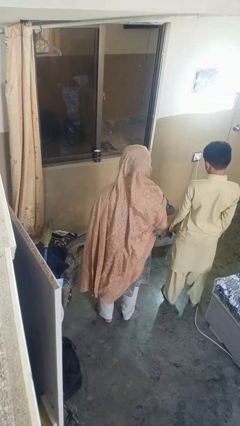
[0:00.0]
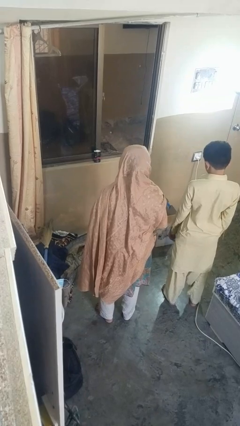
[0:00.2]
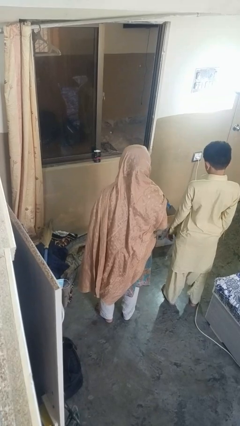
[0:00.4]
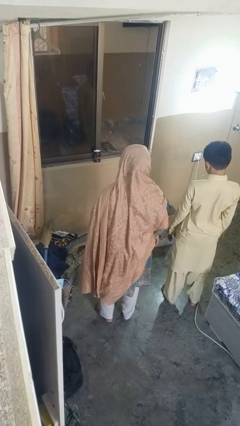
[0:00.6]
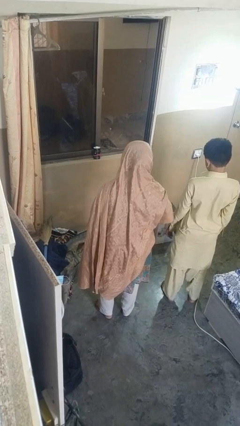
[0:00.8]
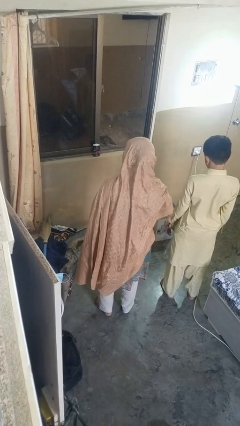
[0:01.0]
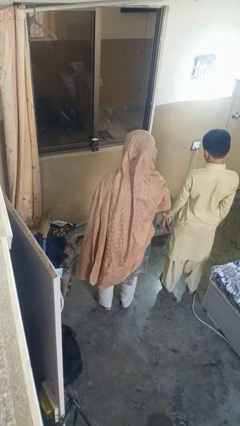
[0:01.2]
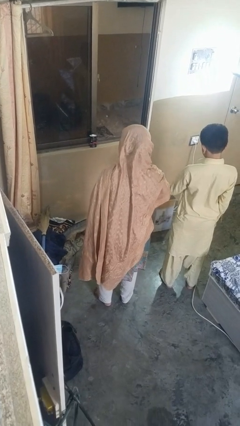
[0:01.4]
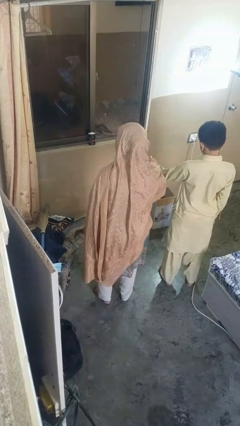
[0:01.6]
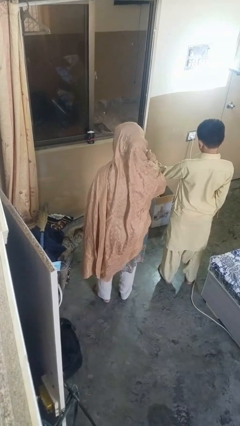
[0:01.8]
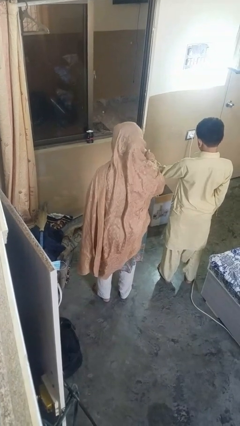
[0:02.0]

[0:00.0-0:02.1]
person grabs person by forearm

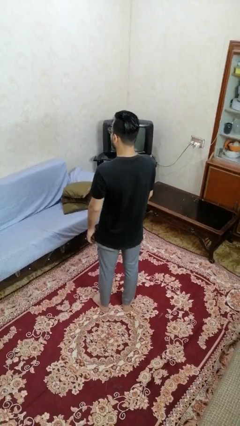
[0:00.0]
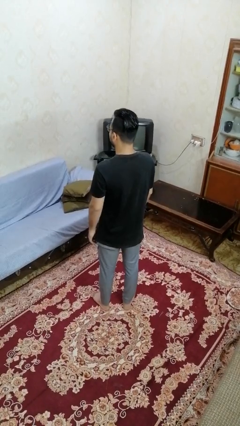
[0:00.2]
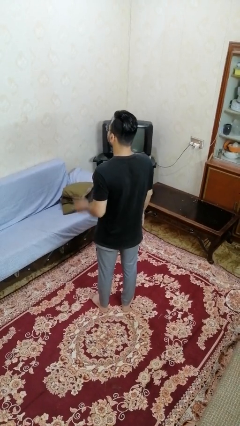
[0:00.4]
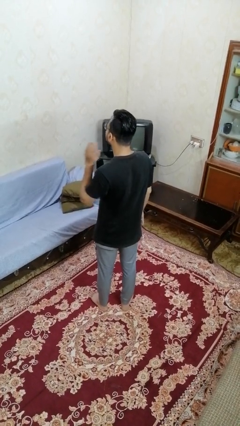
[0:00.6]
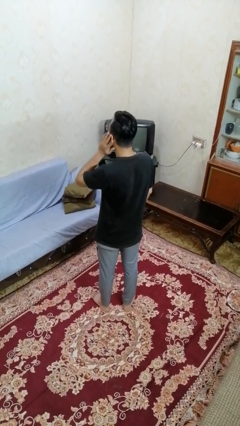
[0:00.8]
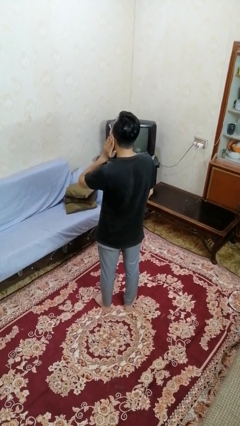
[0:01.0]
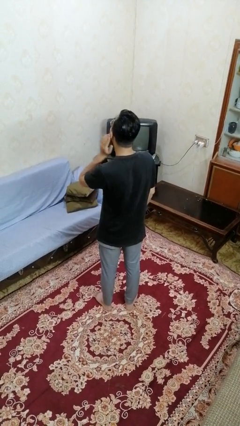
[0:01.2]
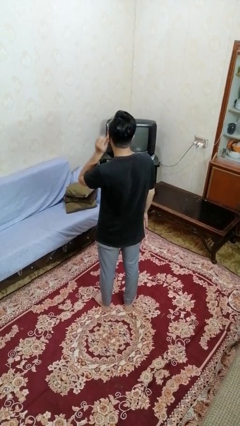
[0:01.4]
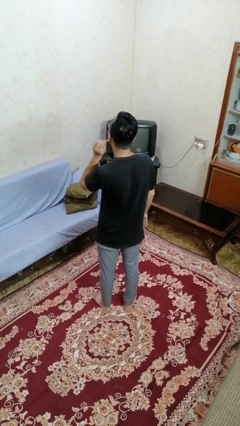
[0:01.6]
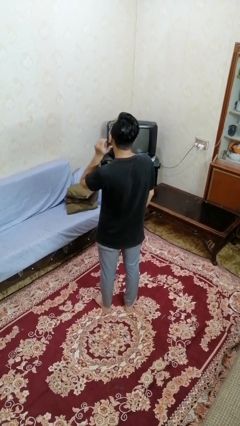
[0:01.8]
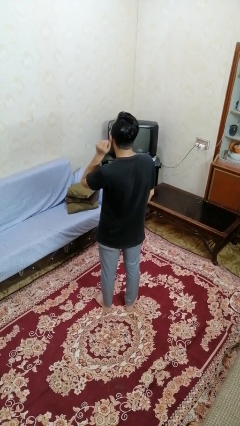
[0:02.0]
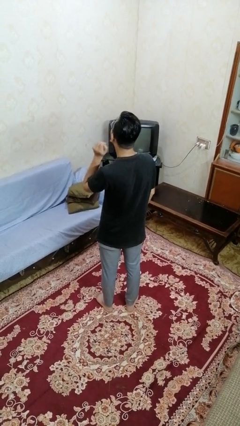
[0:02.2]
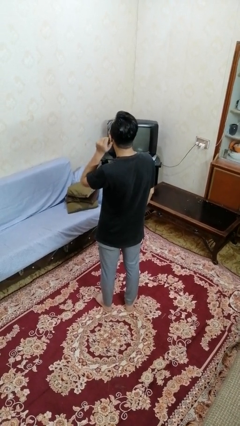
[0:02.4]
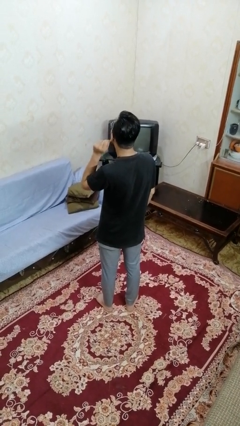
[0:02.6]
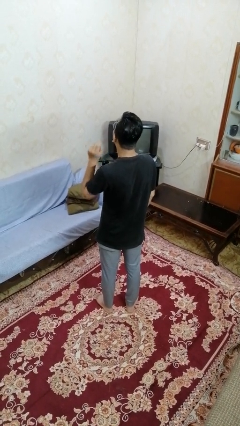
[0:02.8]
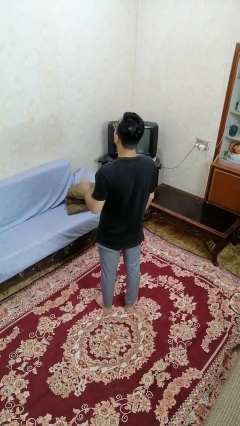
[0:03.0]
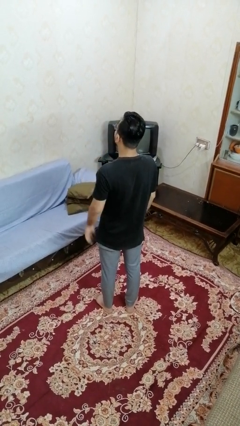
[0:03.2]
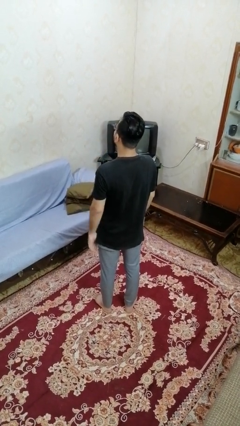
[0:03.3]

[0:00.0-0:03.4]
person touches earlobe

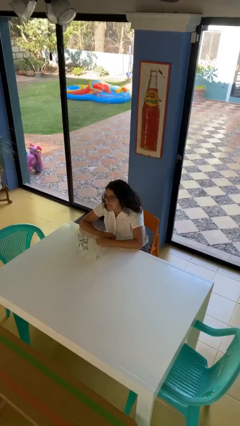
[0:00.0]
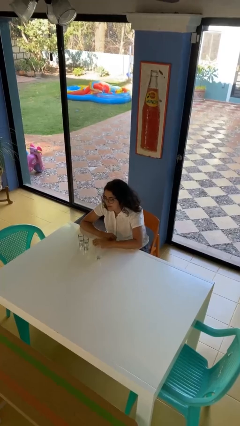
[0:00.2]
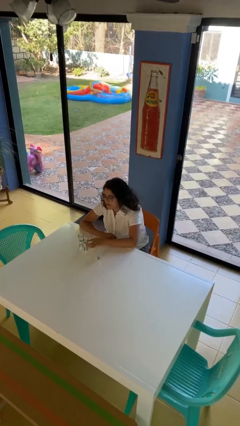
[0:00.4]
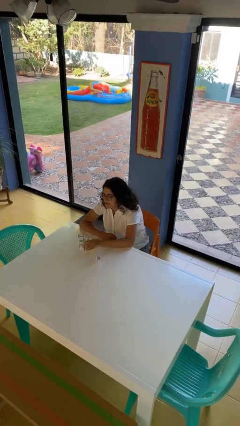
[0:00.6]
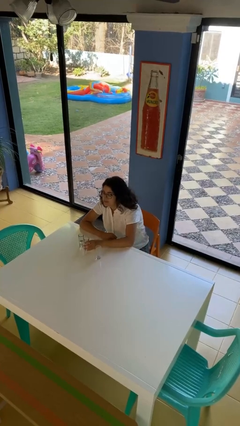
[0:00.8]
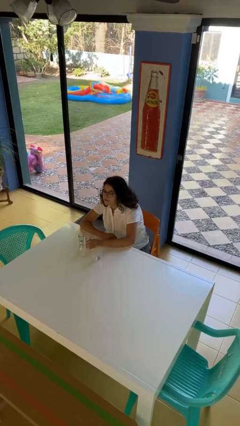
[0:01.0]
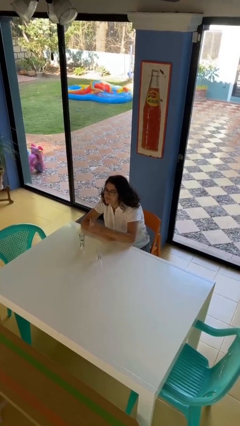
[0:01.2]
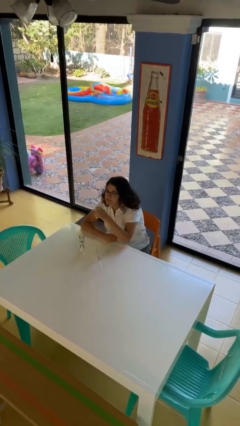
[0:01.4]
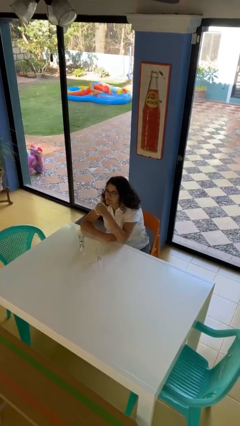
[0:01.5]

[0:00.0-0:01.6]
person picks up object from table

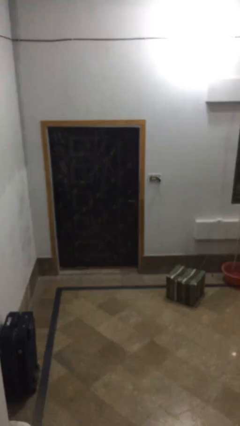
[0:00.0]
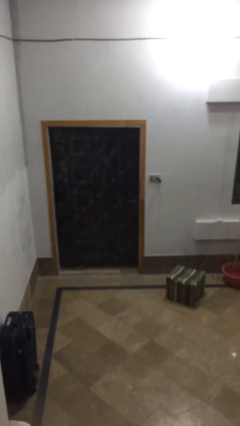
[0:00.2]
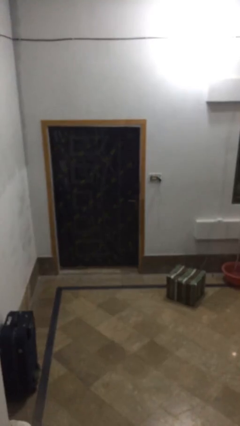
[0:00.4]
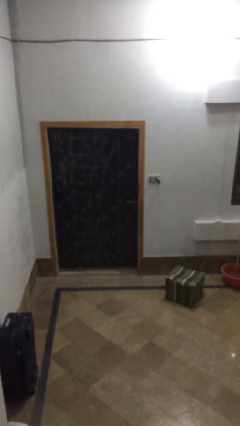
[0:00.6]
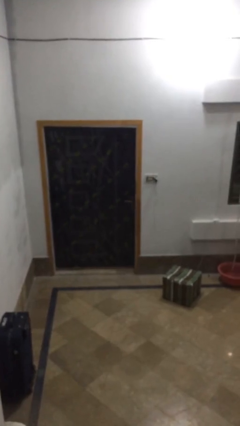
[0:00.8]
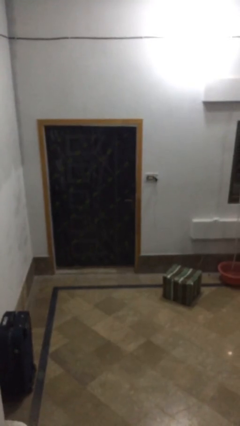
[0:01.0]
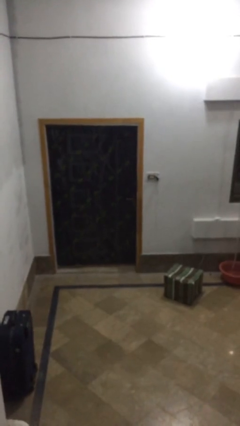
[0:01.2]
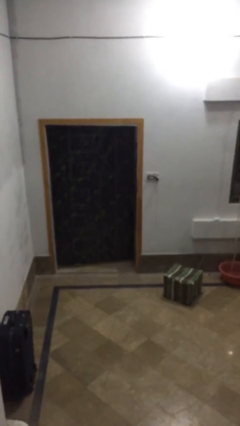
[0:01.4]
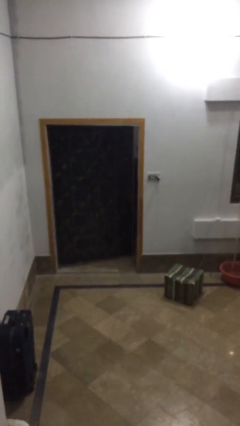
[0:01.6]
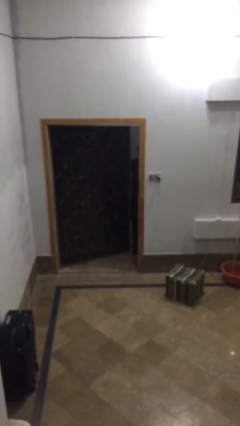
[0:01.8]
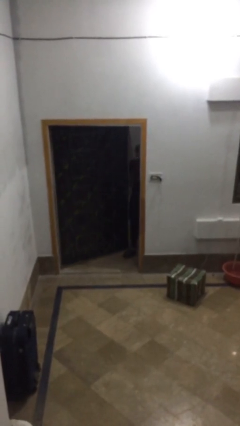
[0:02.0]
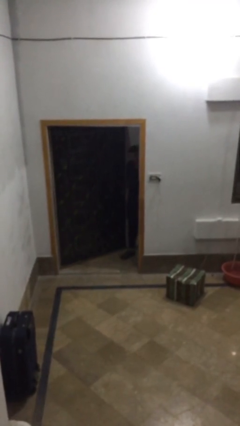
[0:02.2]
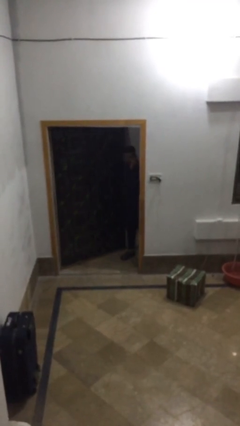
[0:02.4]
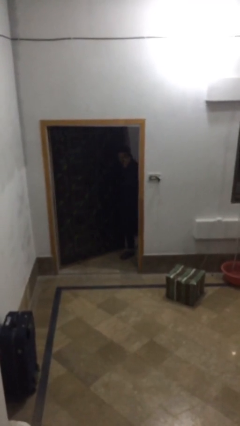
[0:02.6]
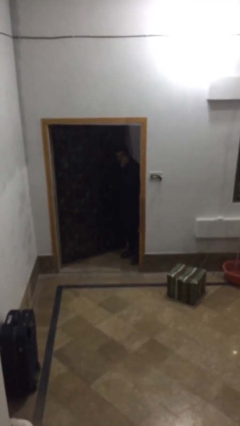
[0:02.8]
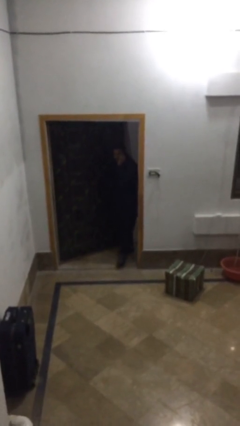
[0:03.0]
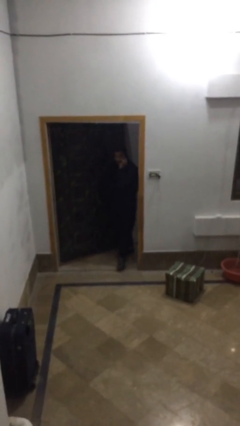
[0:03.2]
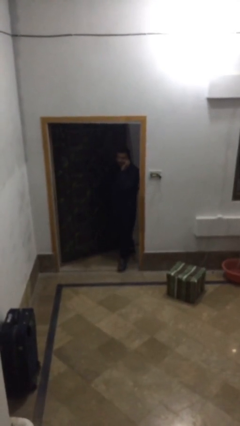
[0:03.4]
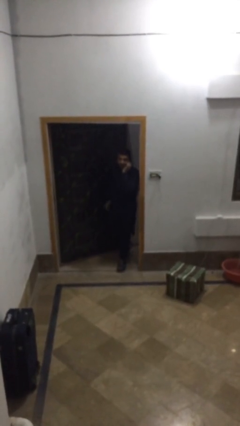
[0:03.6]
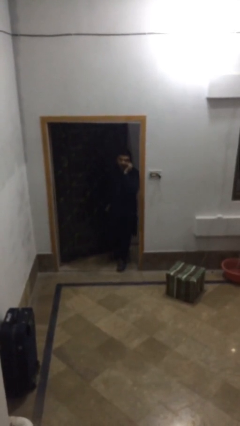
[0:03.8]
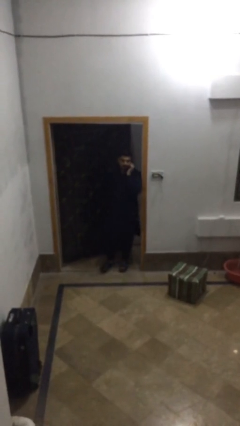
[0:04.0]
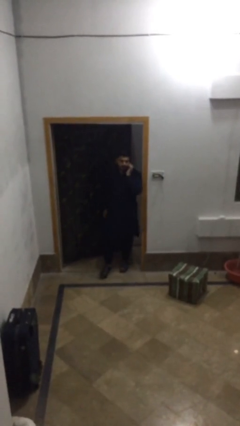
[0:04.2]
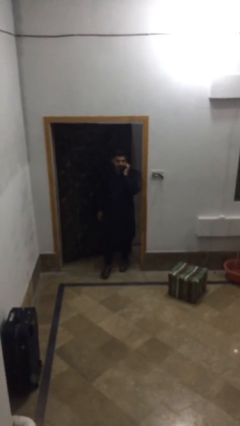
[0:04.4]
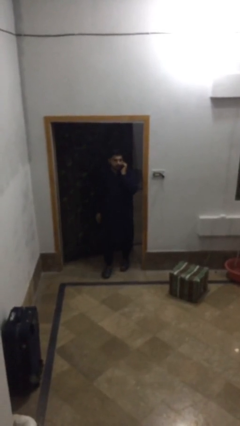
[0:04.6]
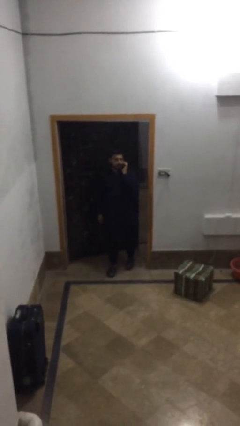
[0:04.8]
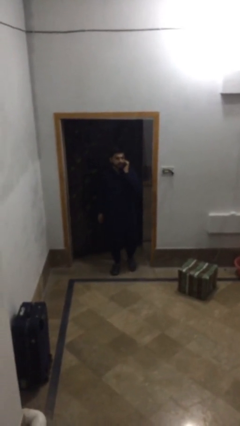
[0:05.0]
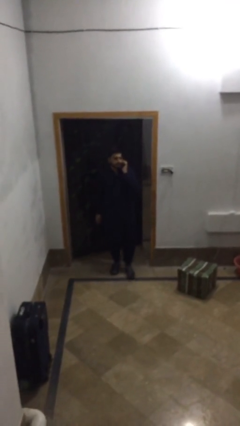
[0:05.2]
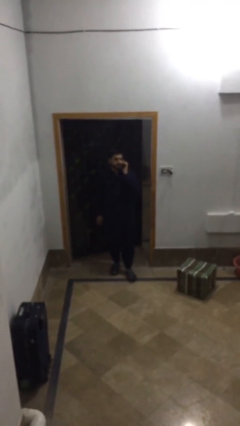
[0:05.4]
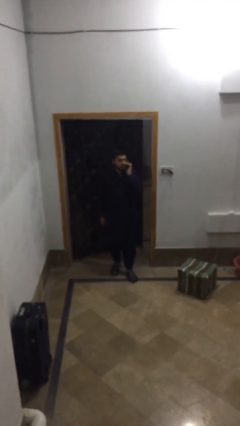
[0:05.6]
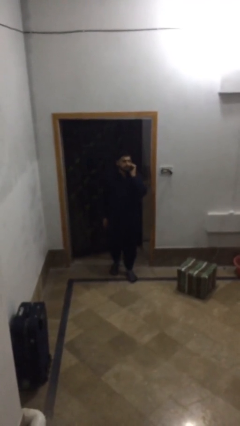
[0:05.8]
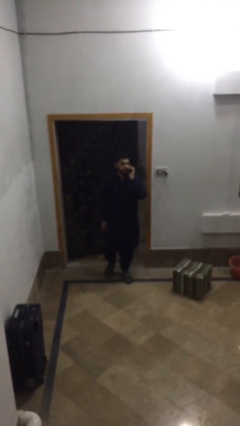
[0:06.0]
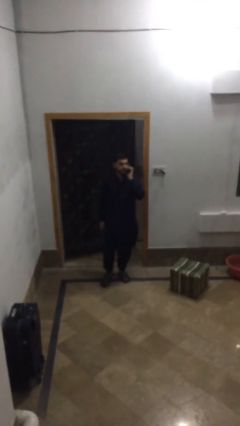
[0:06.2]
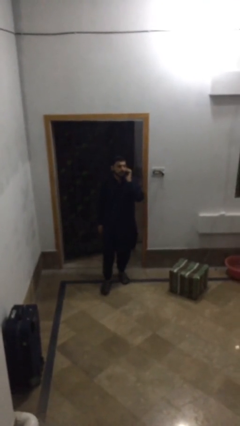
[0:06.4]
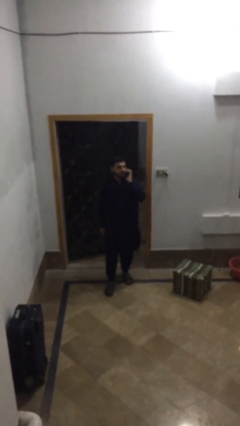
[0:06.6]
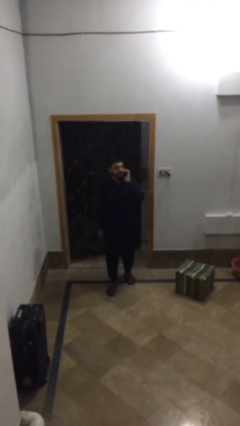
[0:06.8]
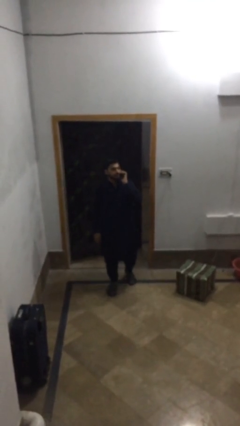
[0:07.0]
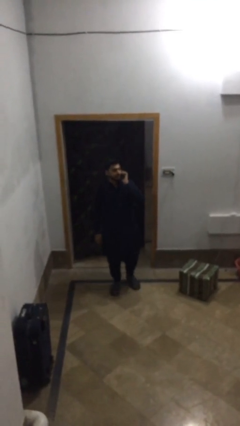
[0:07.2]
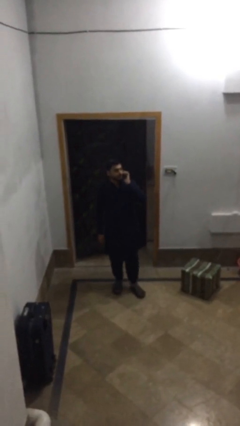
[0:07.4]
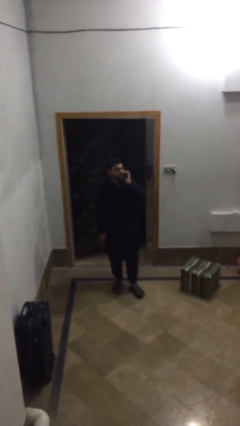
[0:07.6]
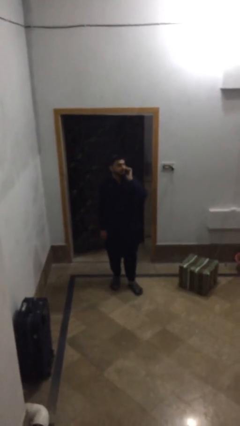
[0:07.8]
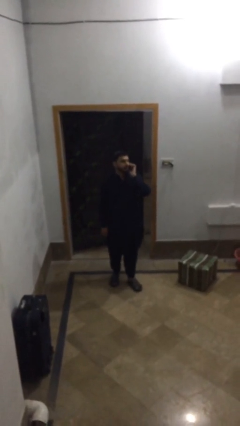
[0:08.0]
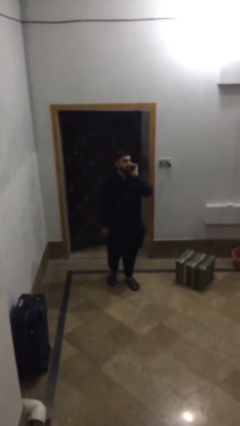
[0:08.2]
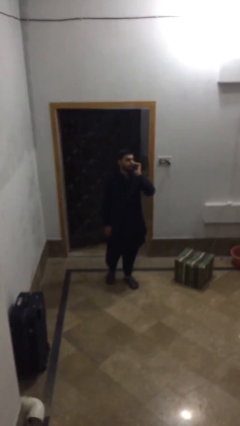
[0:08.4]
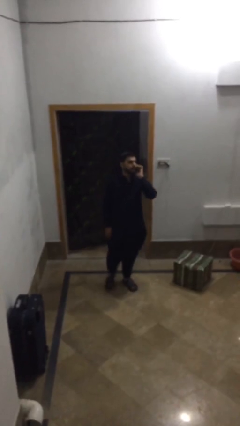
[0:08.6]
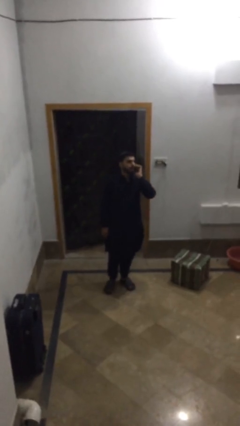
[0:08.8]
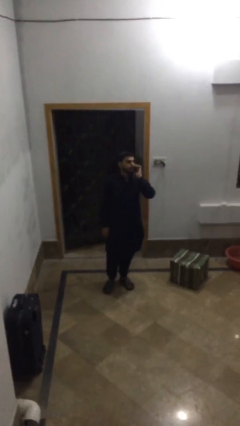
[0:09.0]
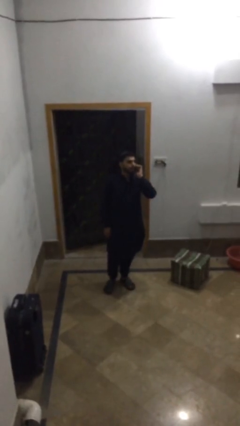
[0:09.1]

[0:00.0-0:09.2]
person enters scene through structure

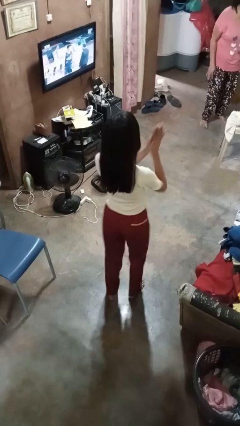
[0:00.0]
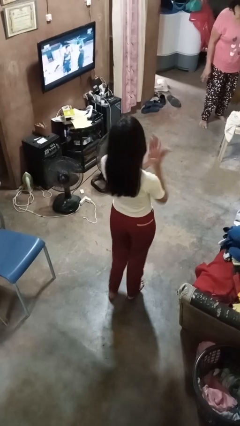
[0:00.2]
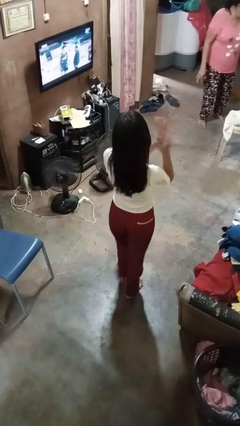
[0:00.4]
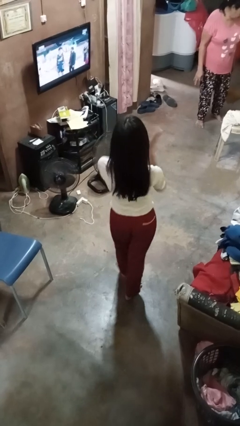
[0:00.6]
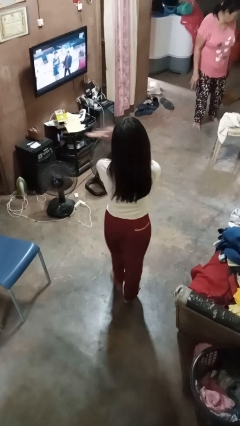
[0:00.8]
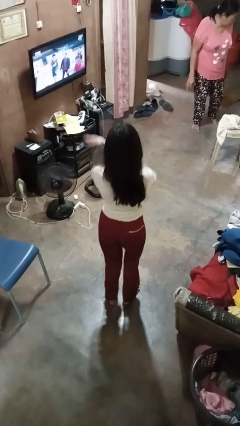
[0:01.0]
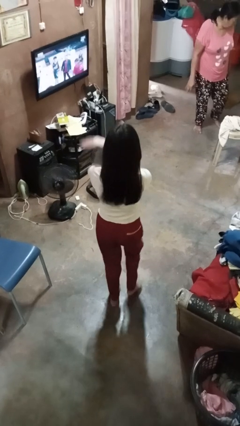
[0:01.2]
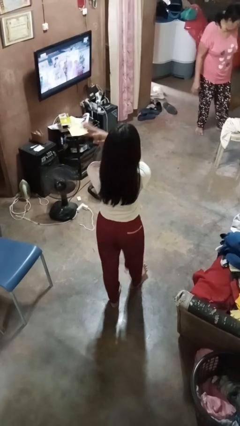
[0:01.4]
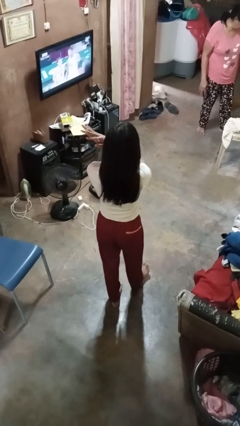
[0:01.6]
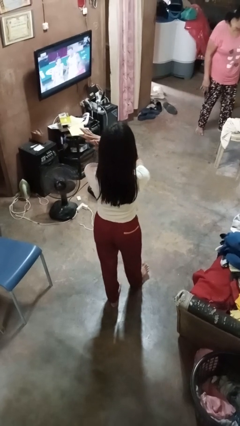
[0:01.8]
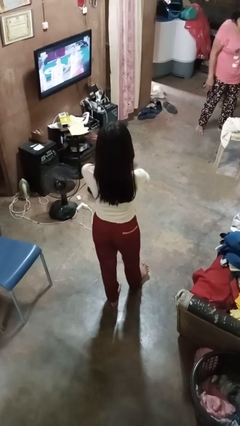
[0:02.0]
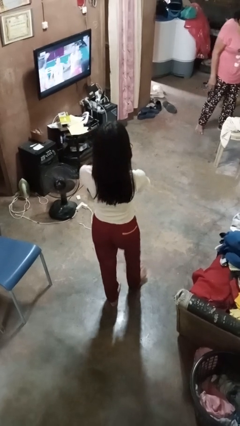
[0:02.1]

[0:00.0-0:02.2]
person dances in place
